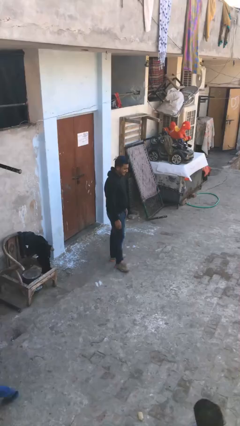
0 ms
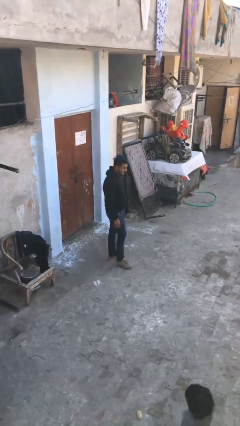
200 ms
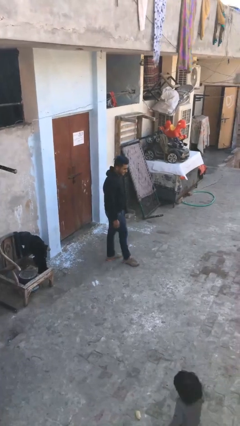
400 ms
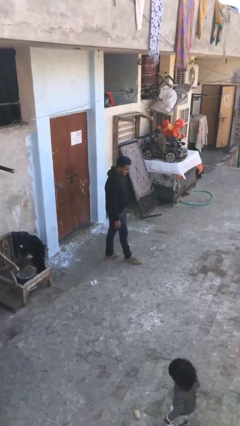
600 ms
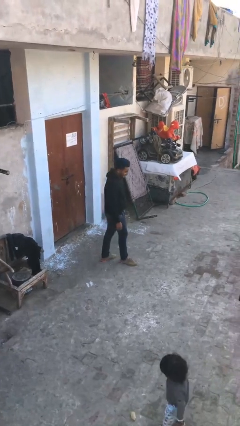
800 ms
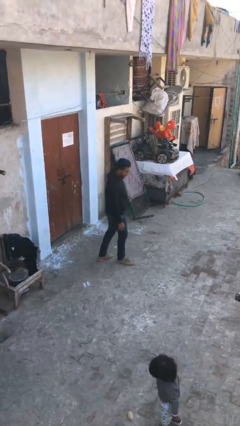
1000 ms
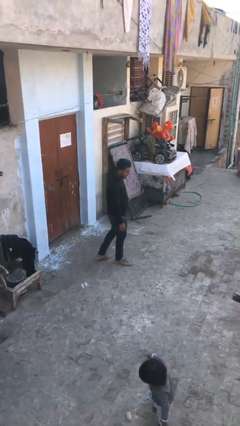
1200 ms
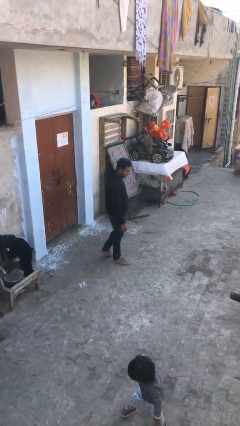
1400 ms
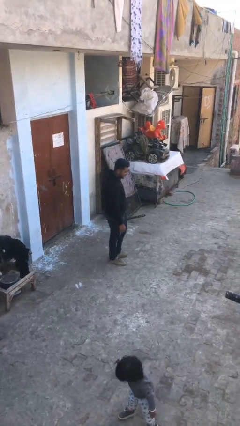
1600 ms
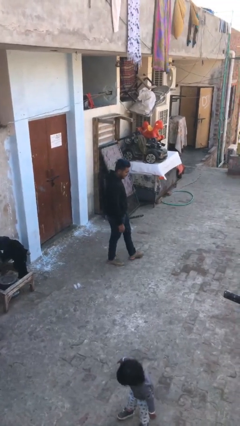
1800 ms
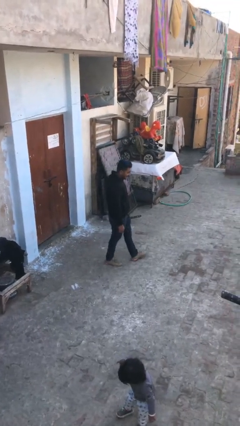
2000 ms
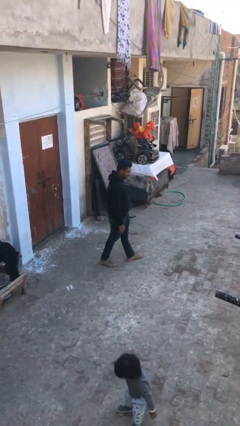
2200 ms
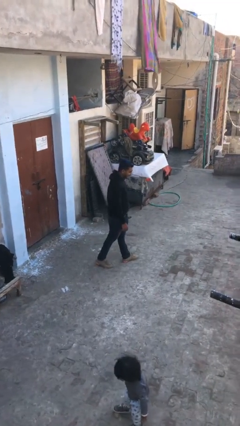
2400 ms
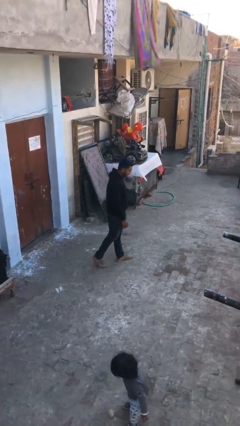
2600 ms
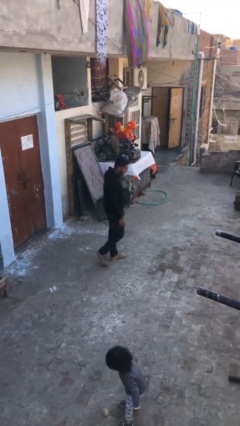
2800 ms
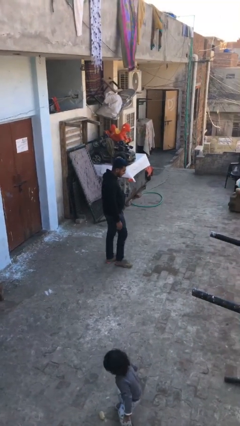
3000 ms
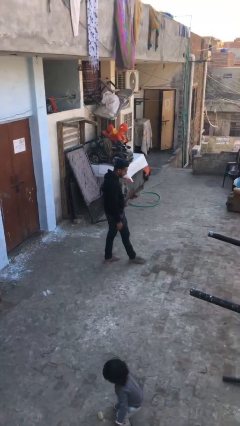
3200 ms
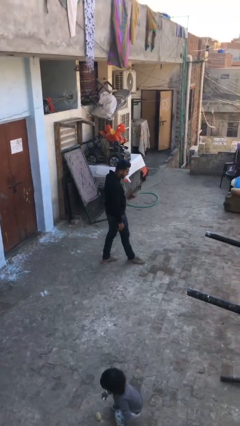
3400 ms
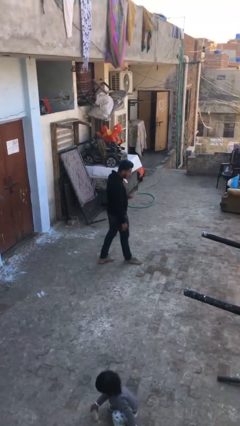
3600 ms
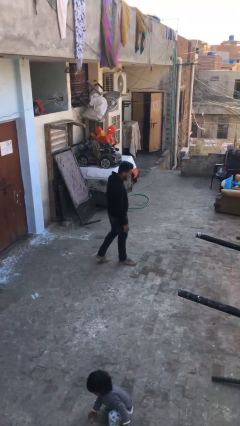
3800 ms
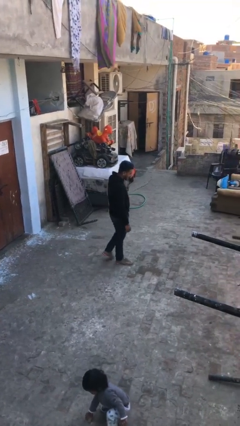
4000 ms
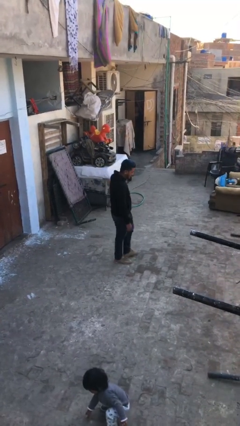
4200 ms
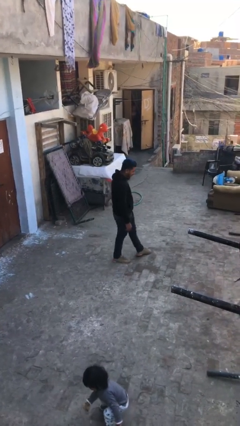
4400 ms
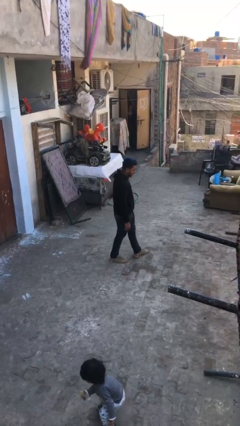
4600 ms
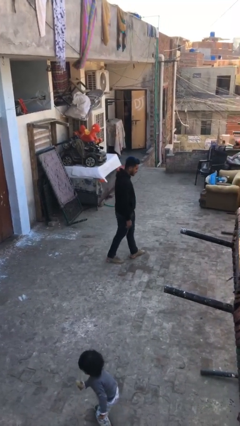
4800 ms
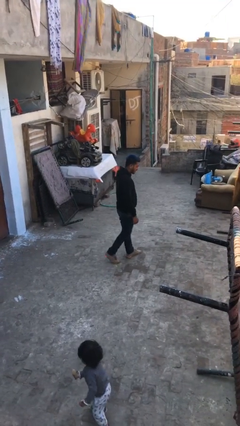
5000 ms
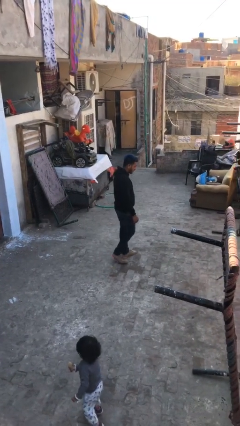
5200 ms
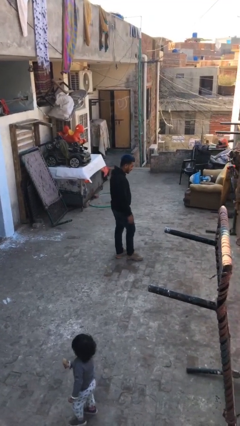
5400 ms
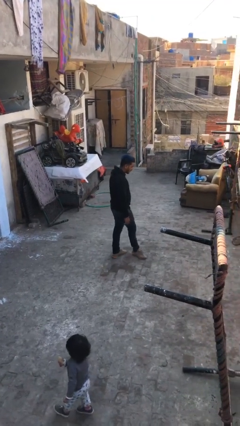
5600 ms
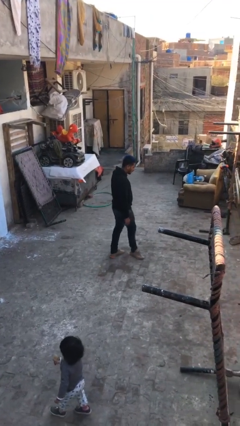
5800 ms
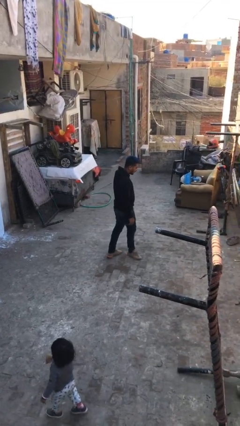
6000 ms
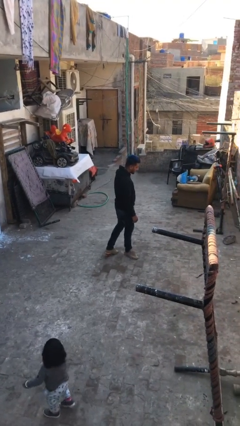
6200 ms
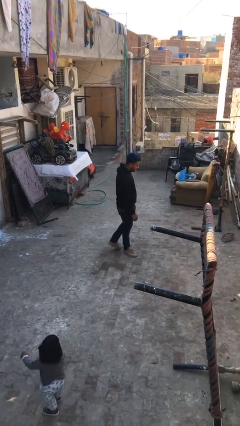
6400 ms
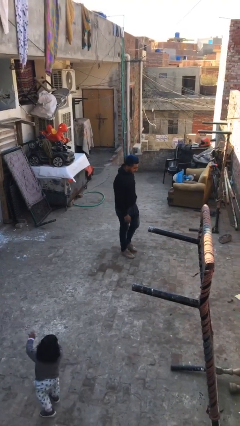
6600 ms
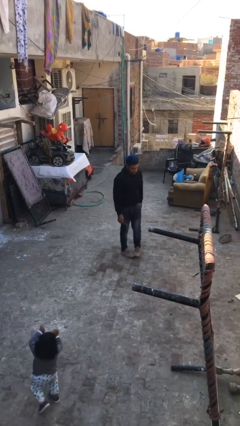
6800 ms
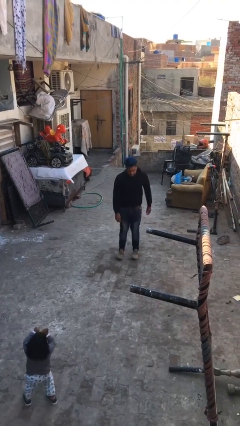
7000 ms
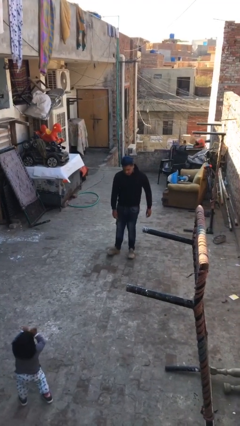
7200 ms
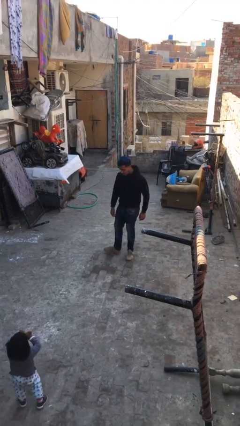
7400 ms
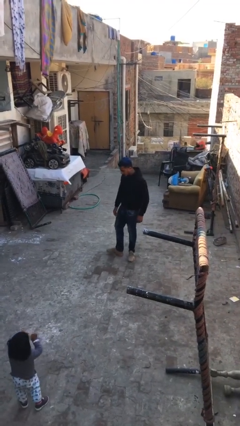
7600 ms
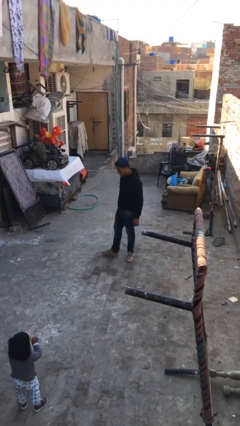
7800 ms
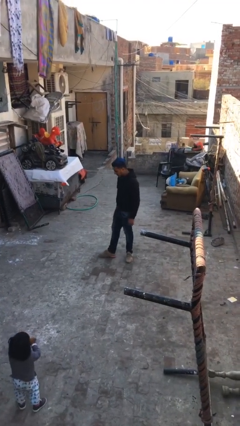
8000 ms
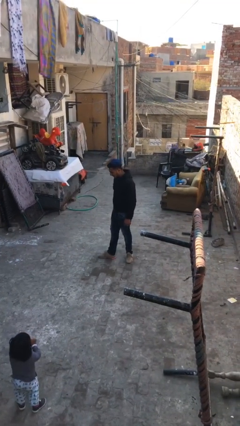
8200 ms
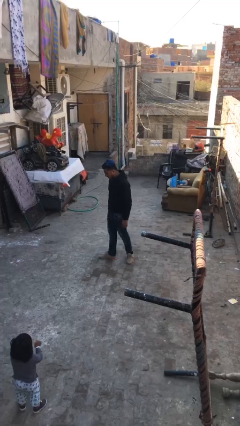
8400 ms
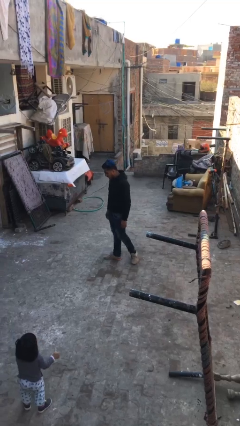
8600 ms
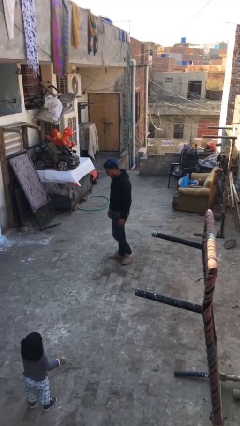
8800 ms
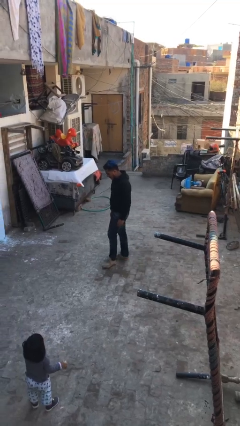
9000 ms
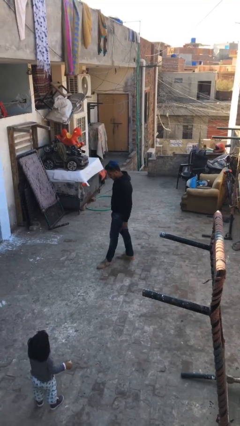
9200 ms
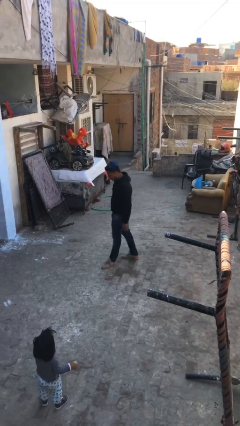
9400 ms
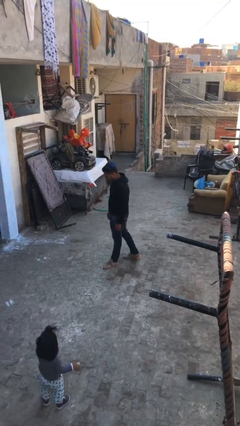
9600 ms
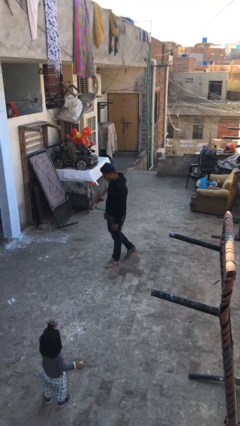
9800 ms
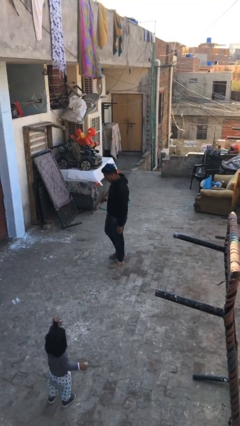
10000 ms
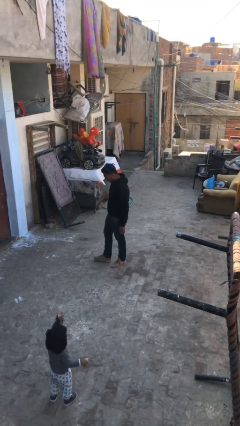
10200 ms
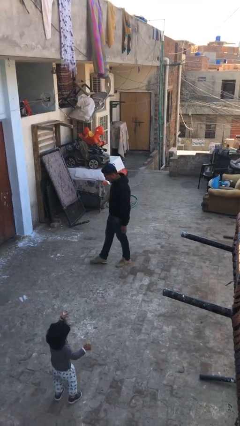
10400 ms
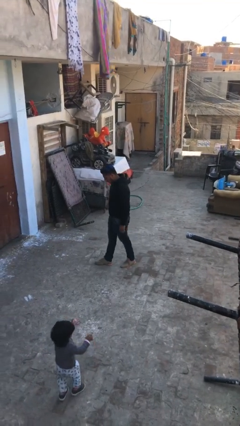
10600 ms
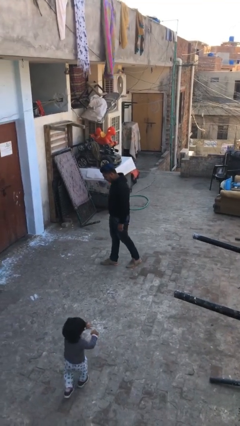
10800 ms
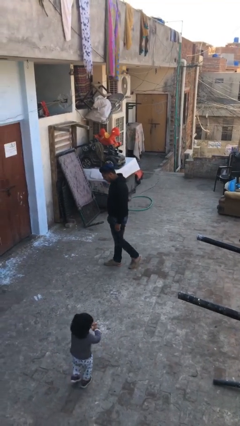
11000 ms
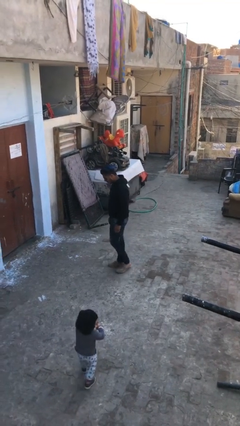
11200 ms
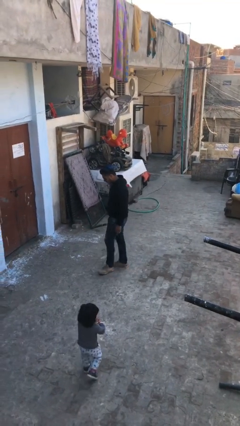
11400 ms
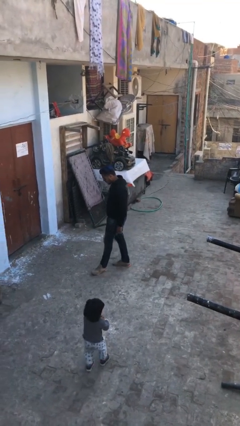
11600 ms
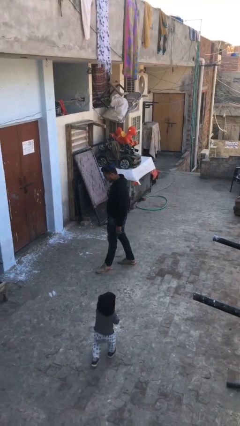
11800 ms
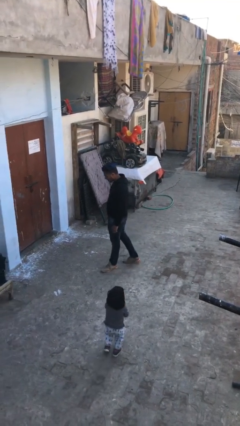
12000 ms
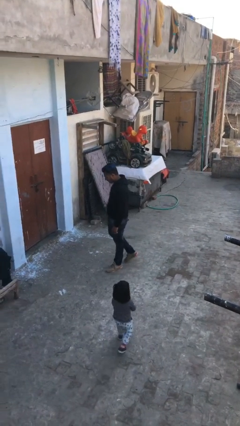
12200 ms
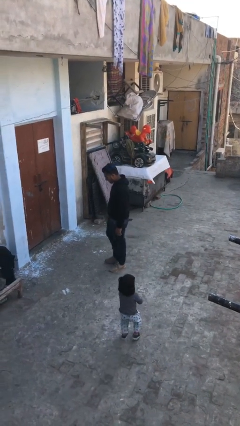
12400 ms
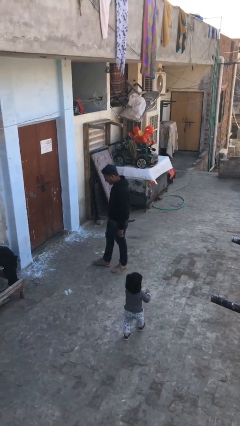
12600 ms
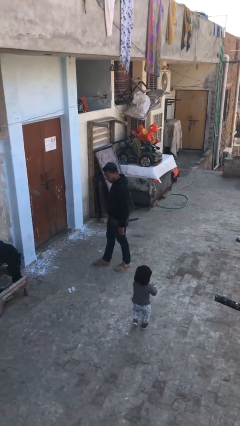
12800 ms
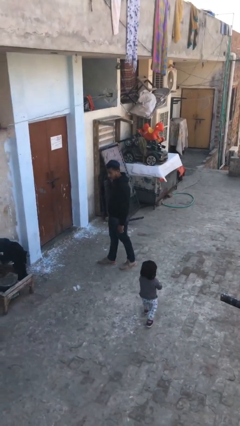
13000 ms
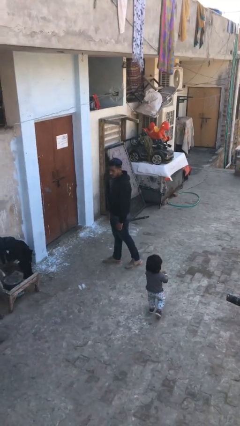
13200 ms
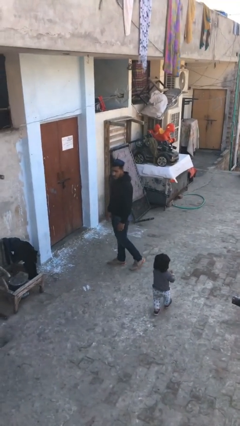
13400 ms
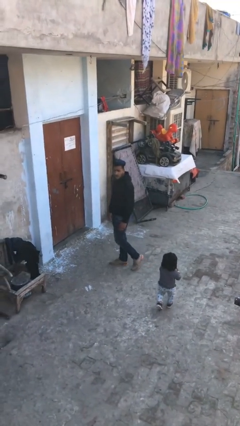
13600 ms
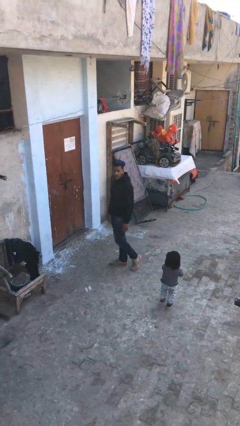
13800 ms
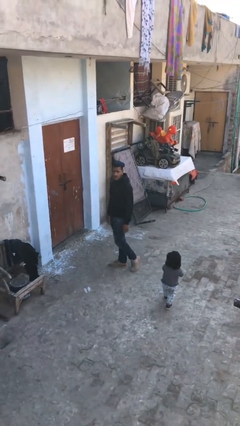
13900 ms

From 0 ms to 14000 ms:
person walks

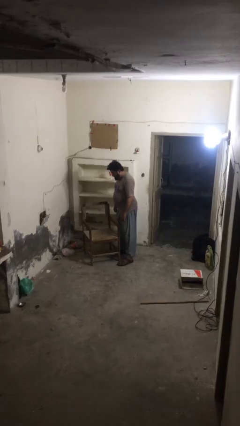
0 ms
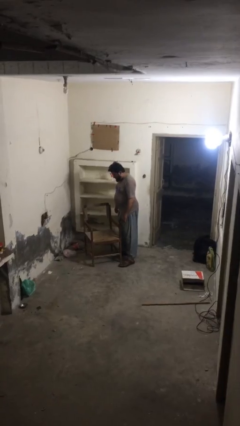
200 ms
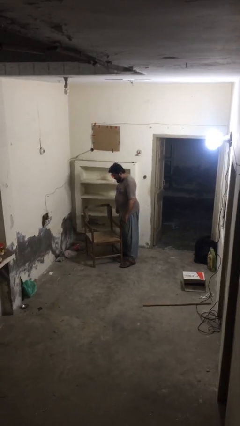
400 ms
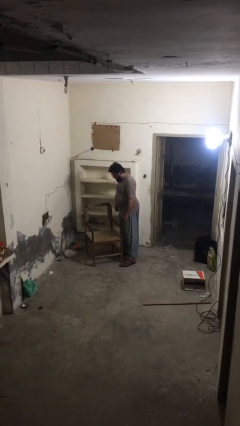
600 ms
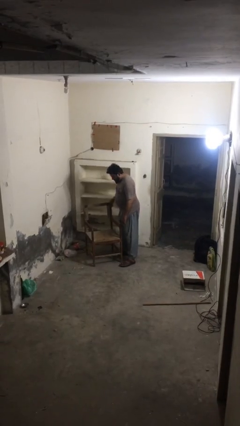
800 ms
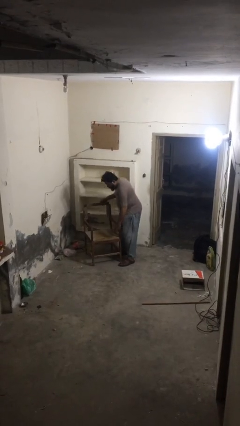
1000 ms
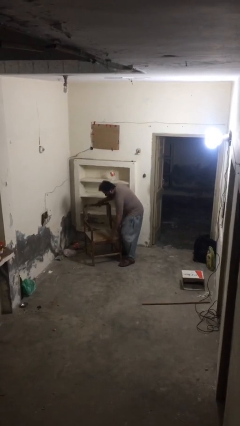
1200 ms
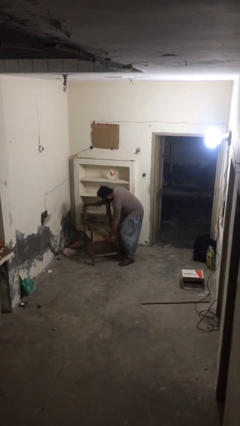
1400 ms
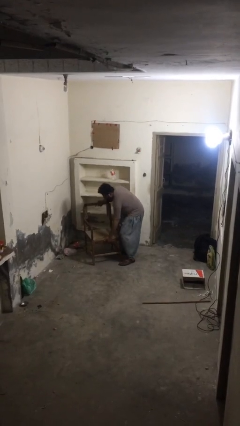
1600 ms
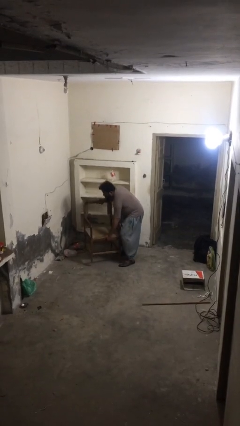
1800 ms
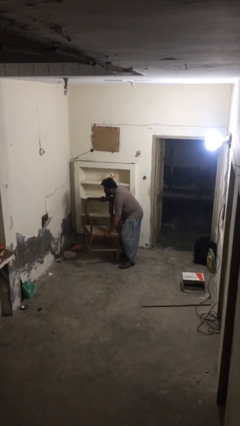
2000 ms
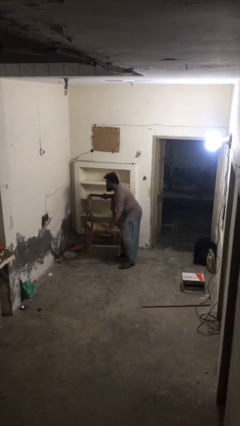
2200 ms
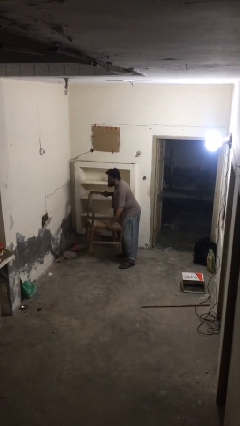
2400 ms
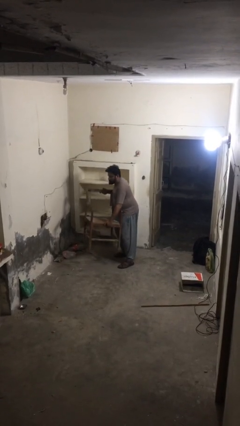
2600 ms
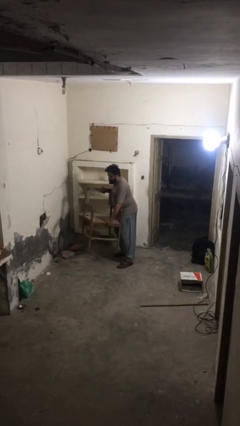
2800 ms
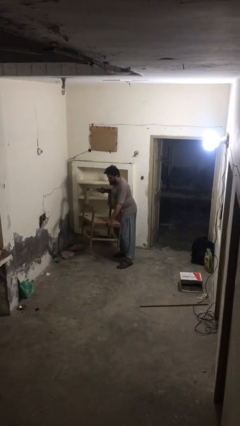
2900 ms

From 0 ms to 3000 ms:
person picks up object from floor

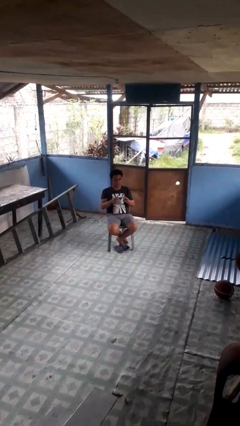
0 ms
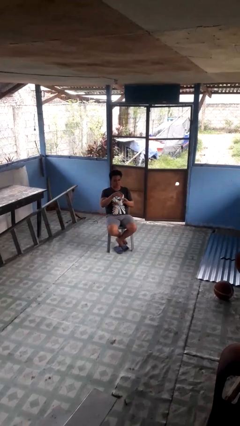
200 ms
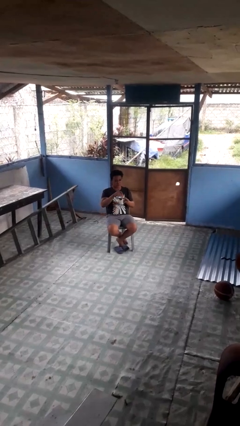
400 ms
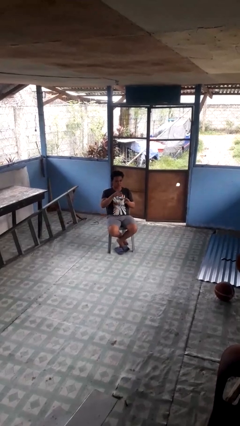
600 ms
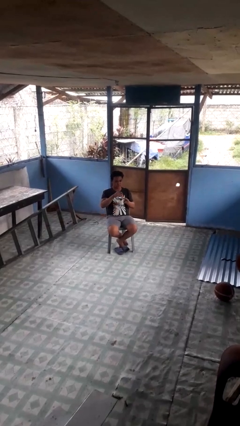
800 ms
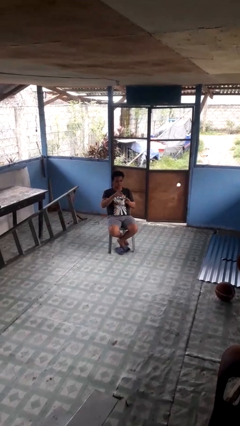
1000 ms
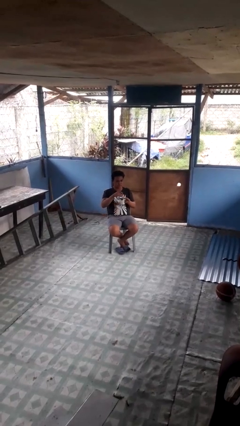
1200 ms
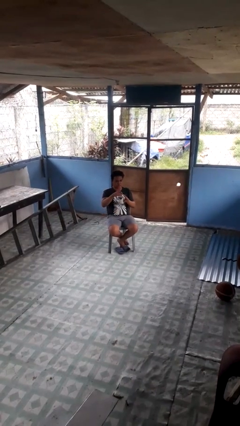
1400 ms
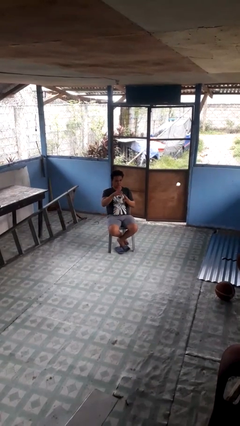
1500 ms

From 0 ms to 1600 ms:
person stirs mug
